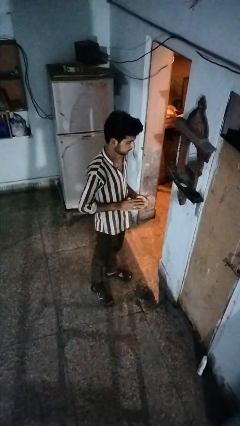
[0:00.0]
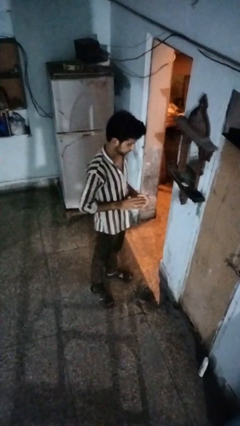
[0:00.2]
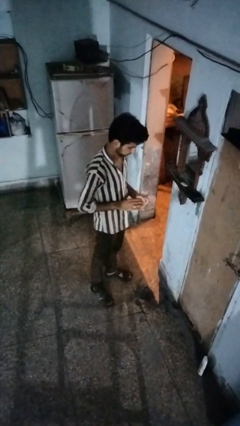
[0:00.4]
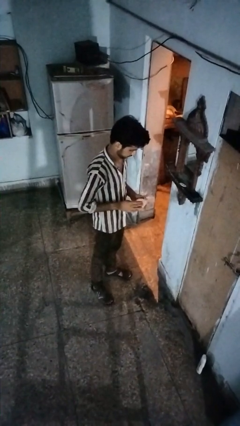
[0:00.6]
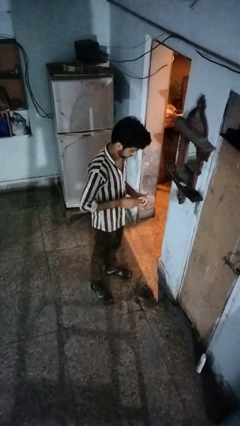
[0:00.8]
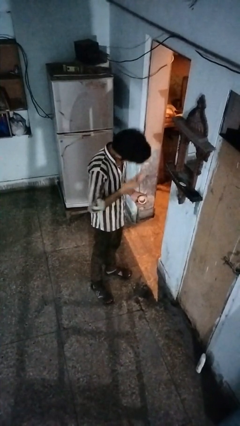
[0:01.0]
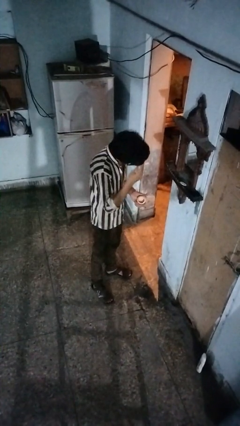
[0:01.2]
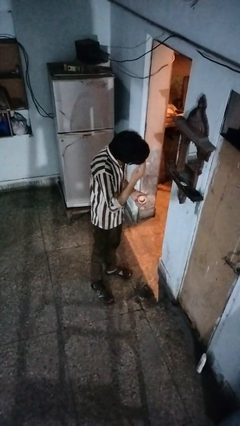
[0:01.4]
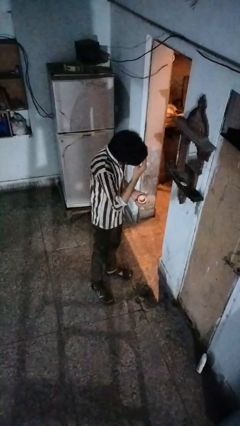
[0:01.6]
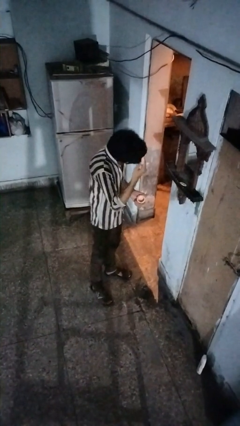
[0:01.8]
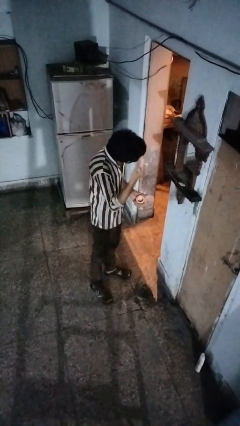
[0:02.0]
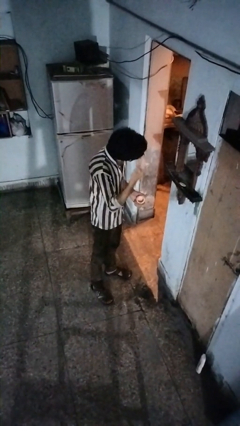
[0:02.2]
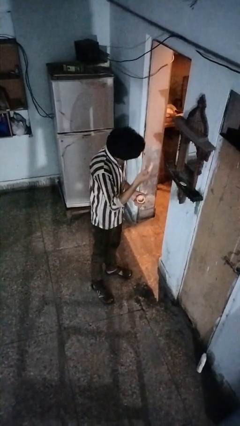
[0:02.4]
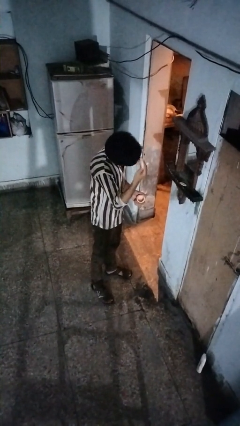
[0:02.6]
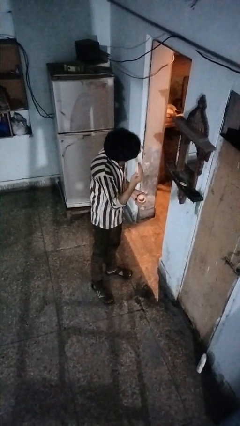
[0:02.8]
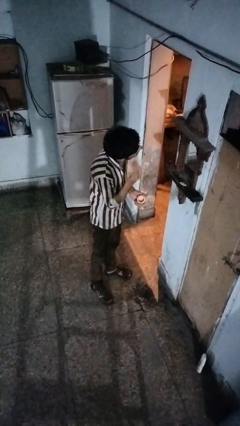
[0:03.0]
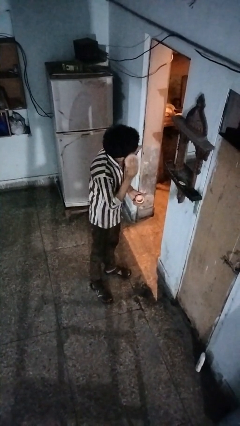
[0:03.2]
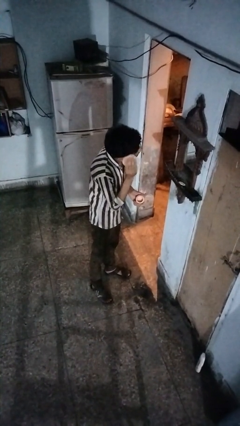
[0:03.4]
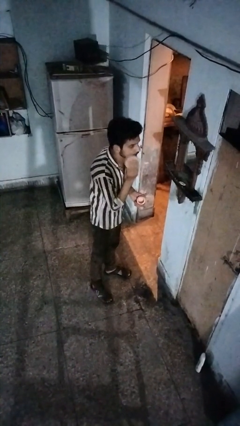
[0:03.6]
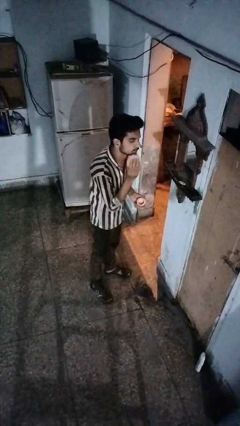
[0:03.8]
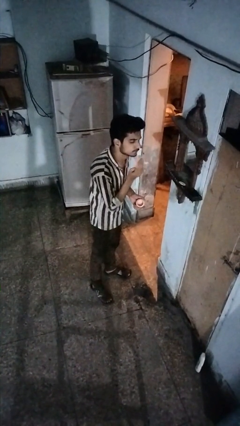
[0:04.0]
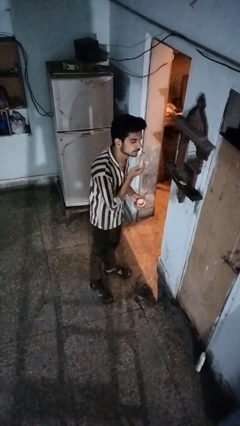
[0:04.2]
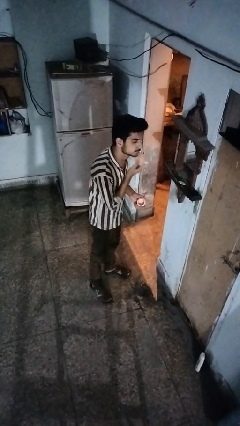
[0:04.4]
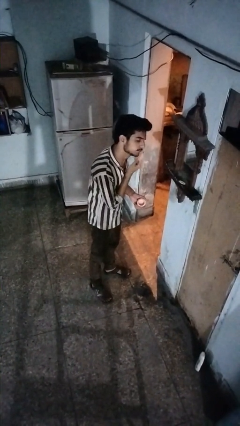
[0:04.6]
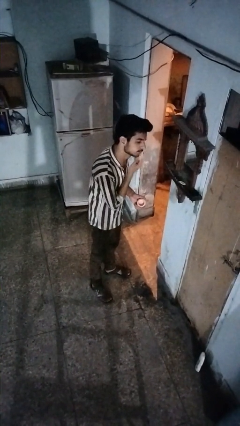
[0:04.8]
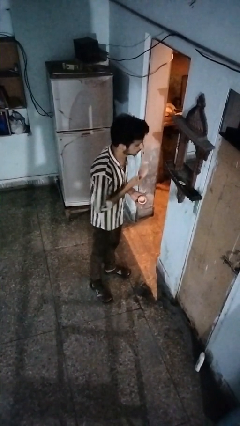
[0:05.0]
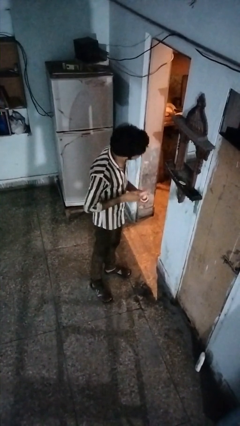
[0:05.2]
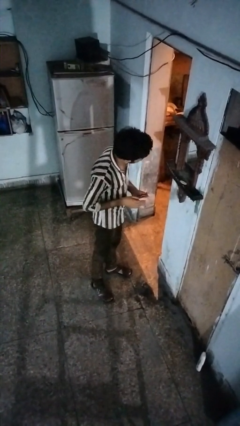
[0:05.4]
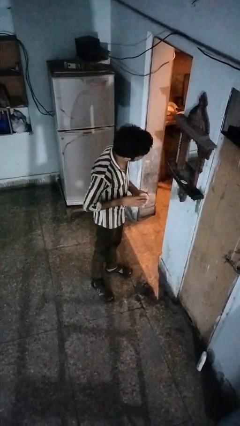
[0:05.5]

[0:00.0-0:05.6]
person applies foundation makeup

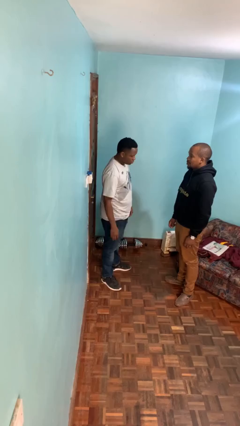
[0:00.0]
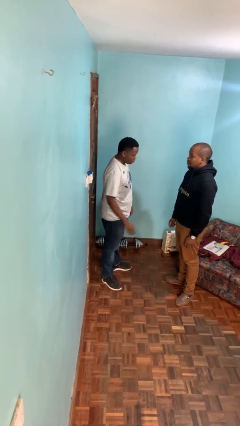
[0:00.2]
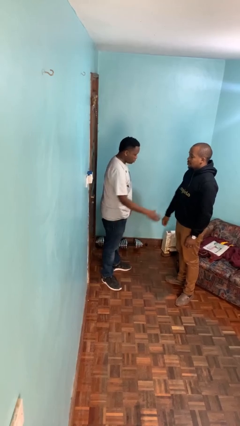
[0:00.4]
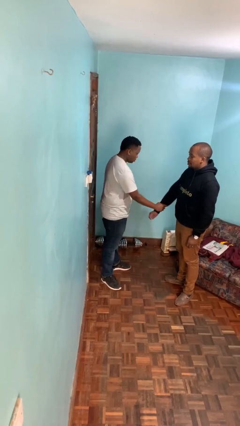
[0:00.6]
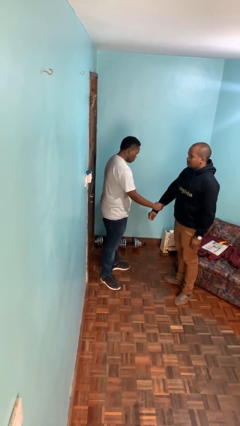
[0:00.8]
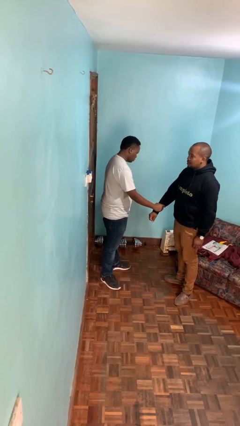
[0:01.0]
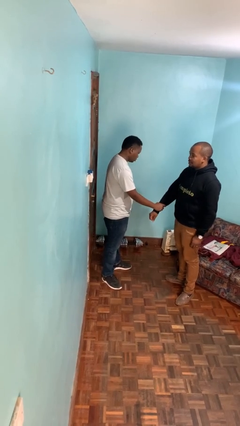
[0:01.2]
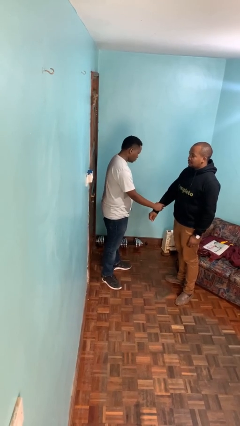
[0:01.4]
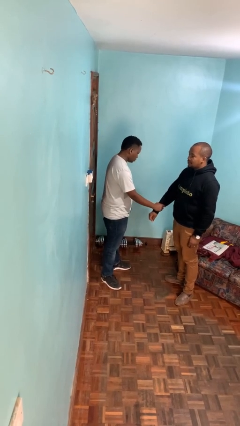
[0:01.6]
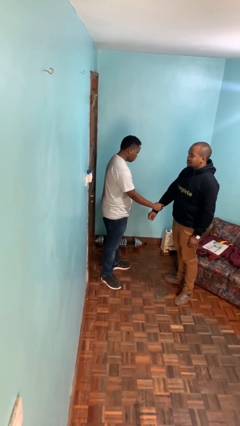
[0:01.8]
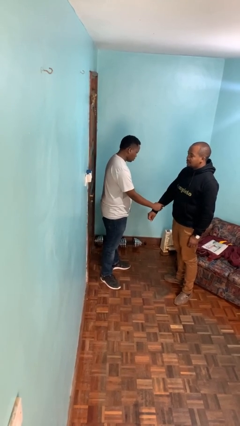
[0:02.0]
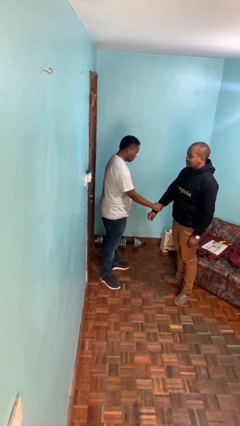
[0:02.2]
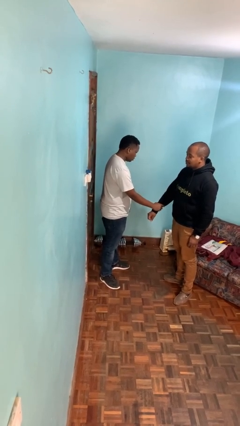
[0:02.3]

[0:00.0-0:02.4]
person grabs person by forearm

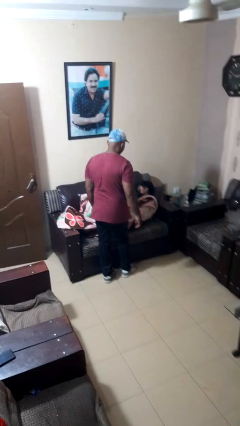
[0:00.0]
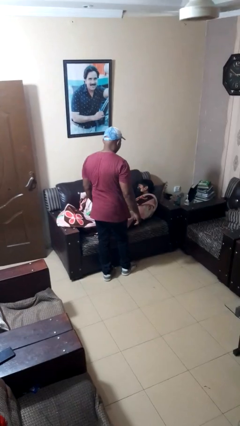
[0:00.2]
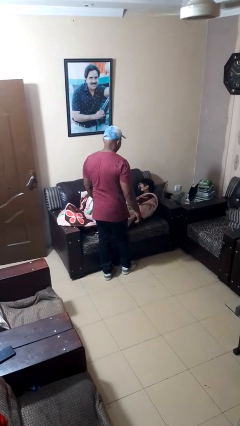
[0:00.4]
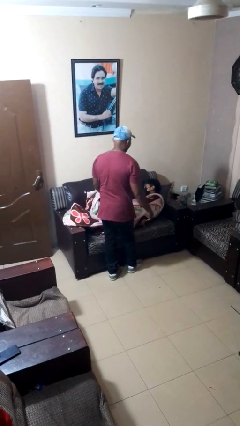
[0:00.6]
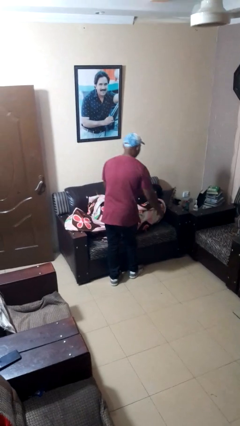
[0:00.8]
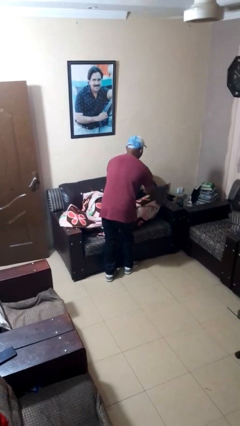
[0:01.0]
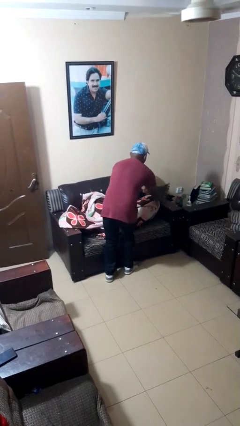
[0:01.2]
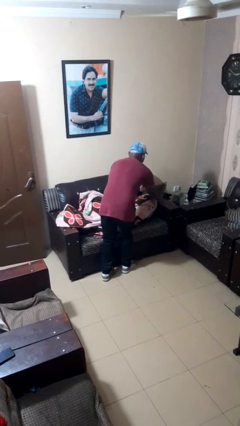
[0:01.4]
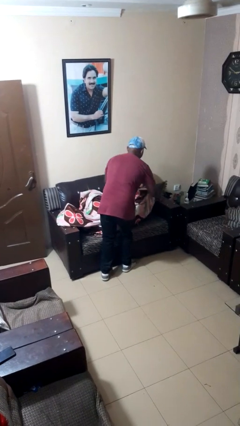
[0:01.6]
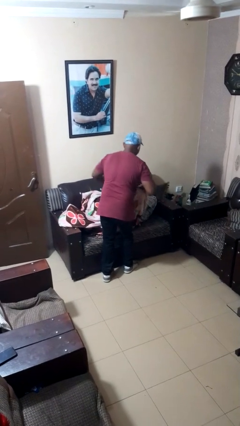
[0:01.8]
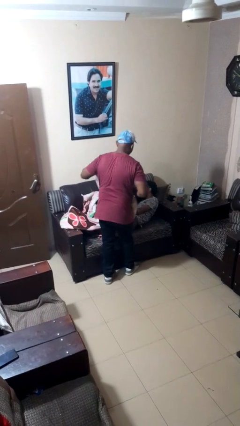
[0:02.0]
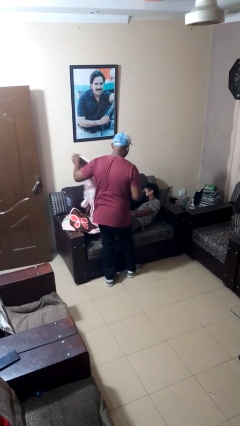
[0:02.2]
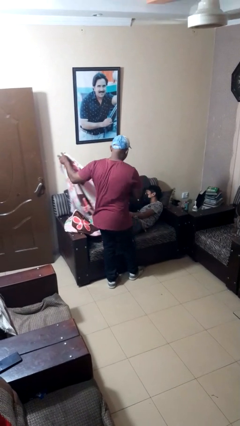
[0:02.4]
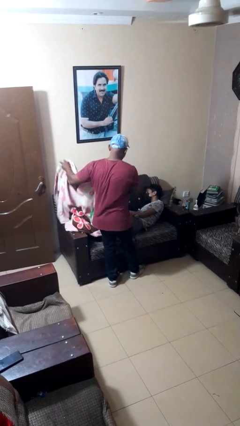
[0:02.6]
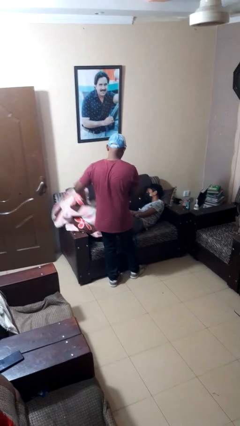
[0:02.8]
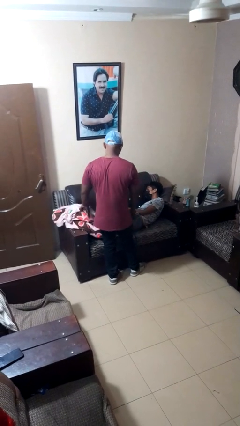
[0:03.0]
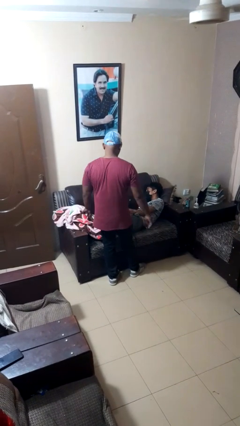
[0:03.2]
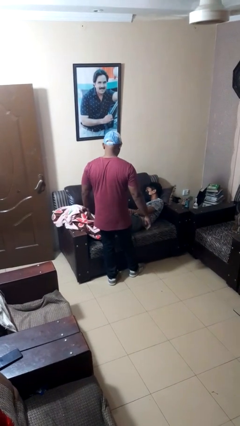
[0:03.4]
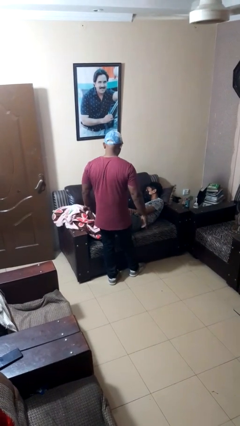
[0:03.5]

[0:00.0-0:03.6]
person uncovers friend with blanket

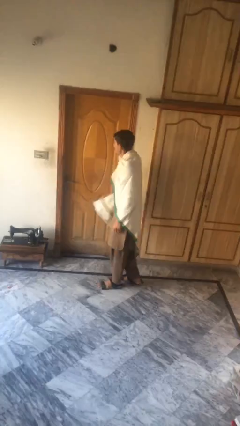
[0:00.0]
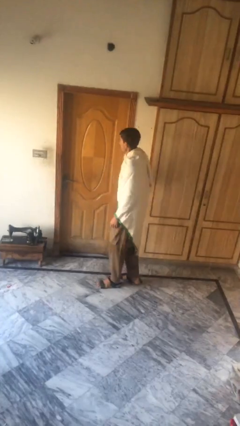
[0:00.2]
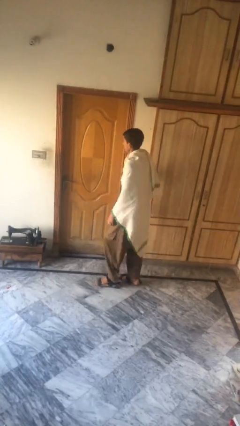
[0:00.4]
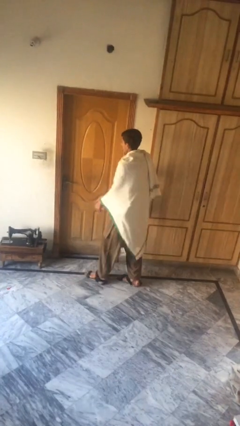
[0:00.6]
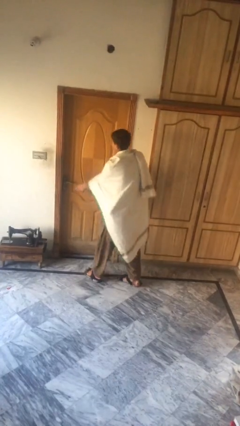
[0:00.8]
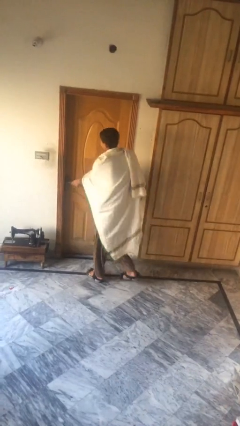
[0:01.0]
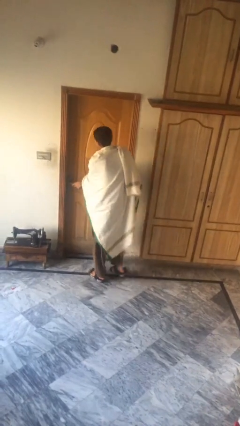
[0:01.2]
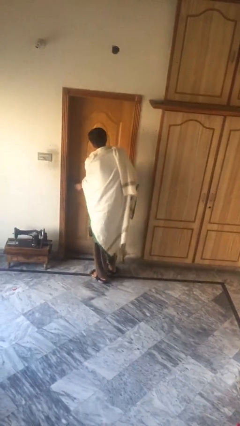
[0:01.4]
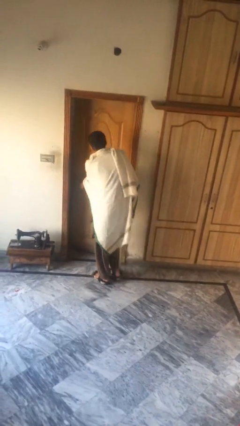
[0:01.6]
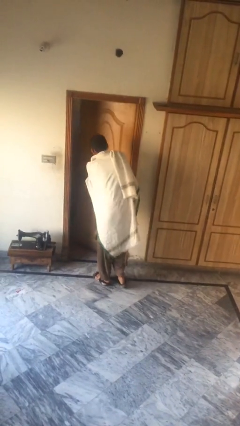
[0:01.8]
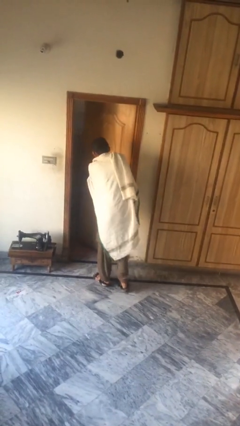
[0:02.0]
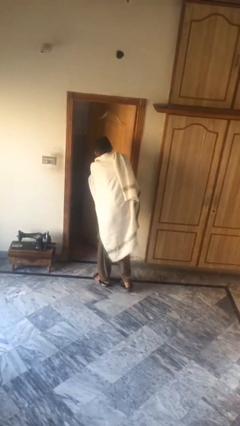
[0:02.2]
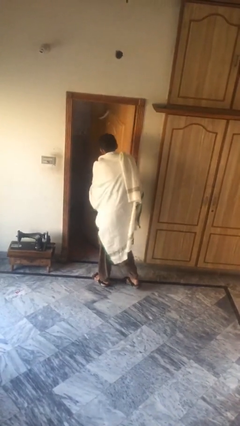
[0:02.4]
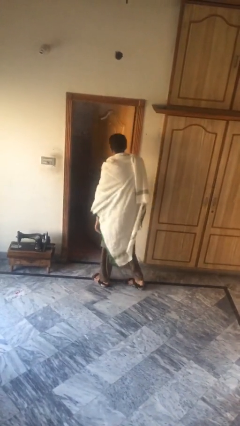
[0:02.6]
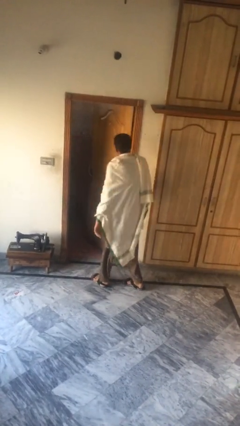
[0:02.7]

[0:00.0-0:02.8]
person opens facility door

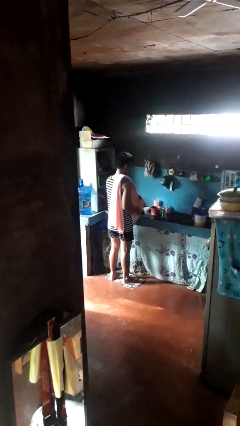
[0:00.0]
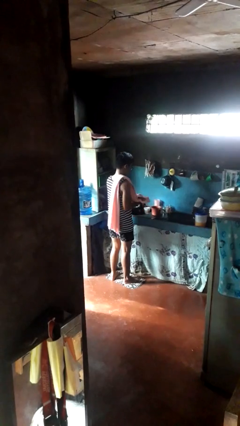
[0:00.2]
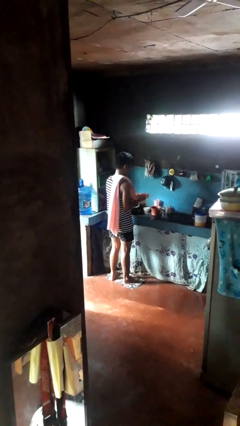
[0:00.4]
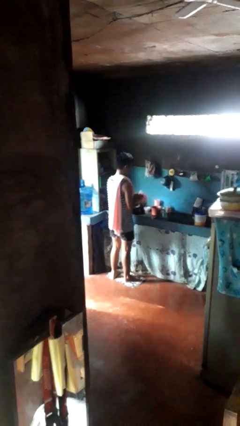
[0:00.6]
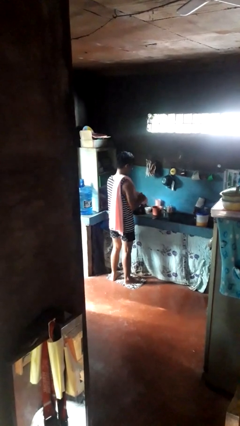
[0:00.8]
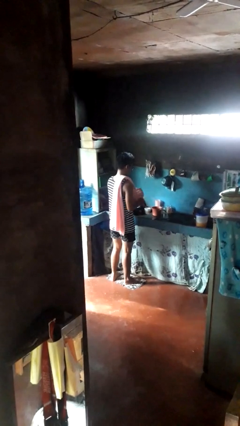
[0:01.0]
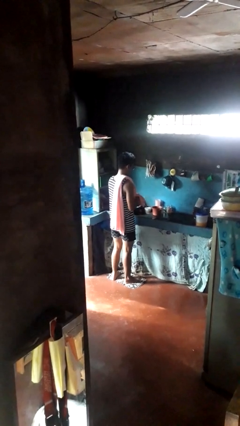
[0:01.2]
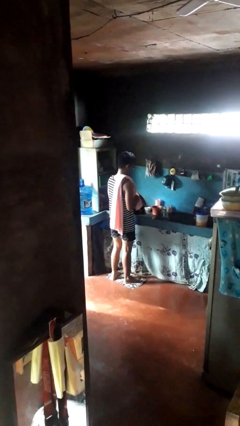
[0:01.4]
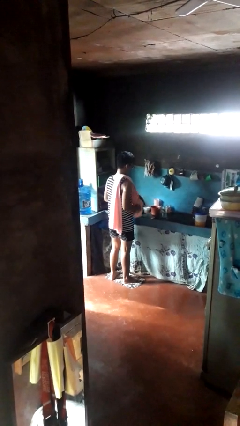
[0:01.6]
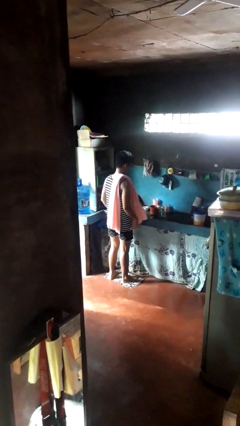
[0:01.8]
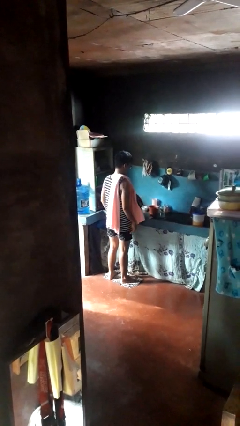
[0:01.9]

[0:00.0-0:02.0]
person dries hands with towel

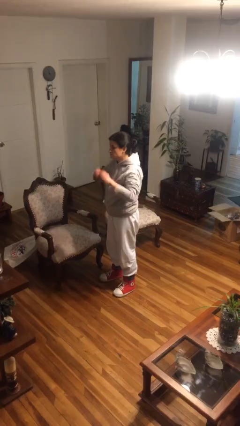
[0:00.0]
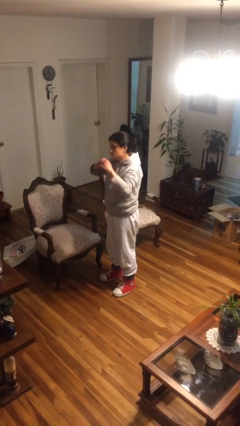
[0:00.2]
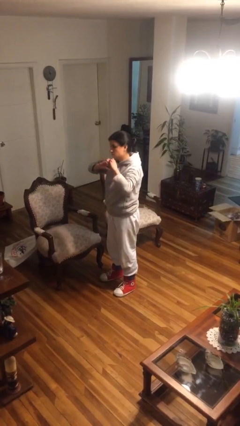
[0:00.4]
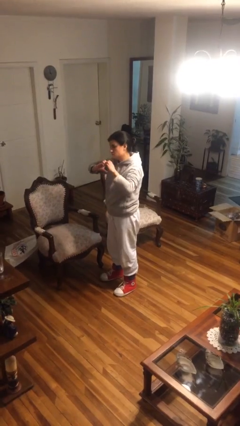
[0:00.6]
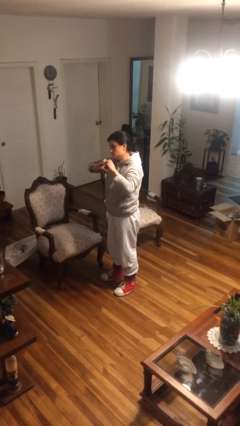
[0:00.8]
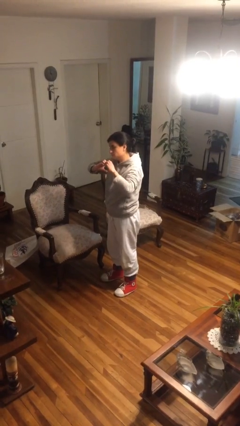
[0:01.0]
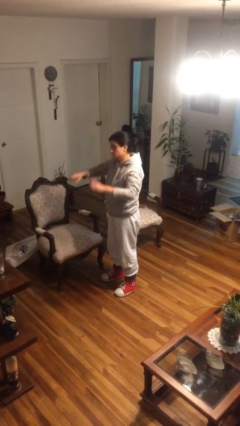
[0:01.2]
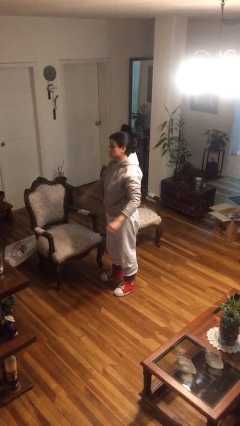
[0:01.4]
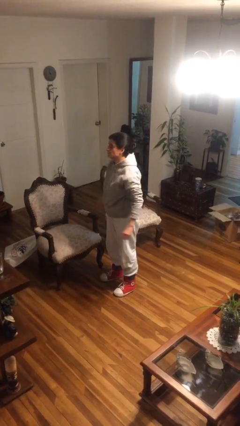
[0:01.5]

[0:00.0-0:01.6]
person gestures heart
